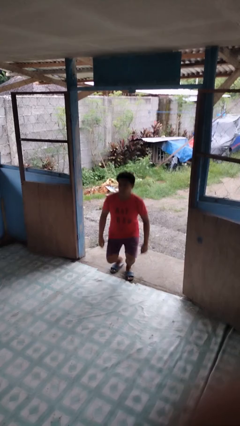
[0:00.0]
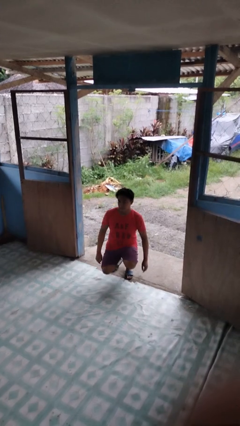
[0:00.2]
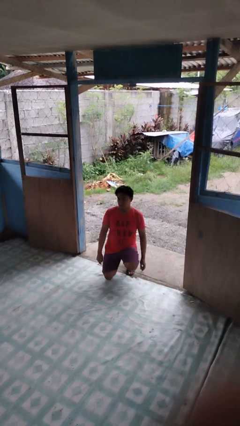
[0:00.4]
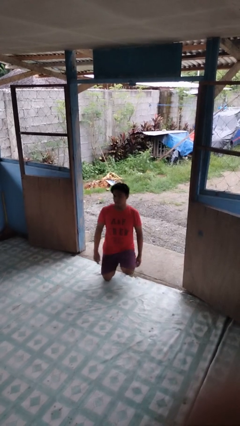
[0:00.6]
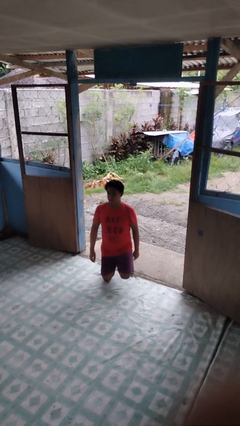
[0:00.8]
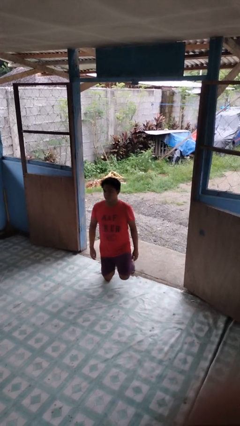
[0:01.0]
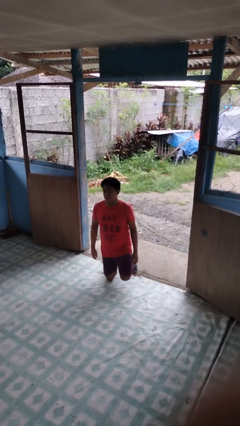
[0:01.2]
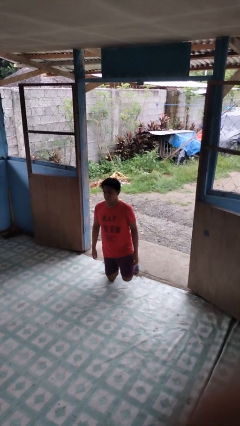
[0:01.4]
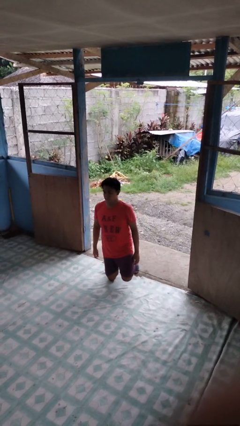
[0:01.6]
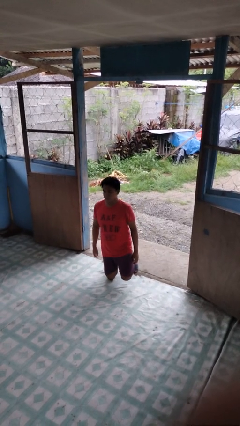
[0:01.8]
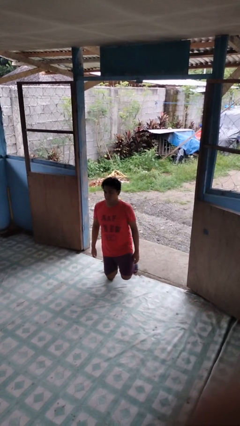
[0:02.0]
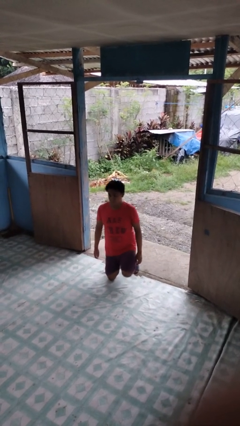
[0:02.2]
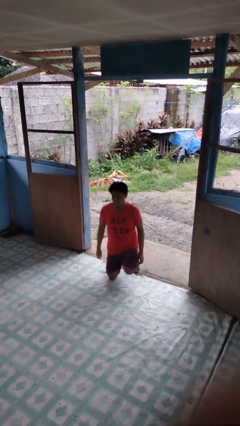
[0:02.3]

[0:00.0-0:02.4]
person kneels

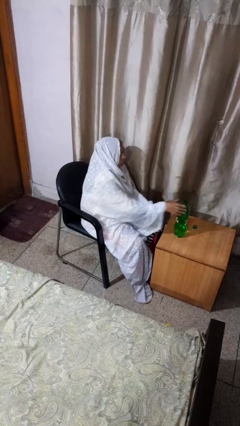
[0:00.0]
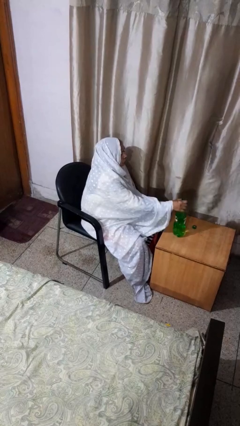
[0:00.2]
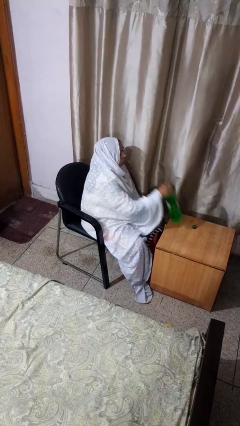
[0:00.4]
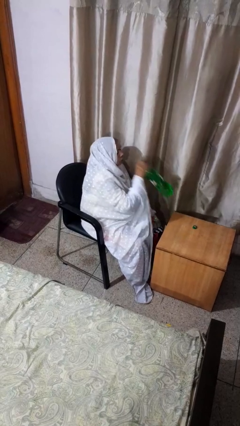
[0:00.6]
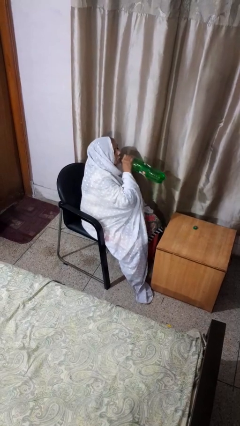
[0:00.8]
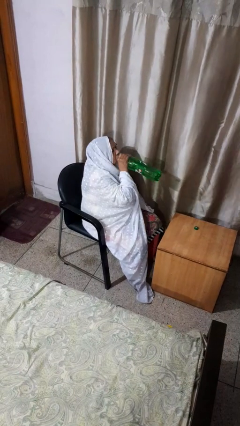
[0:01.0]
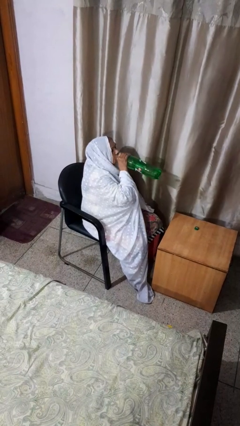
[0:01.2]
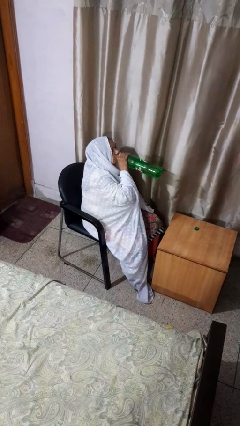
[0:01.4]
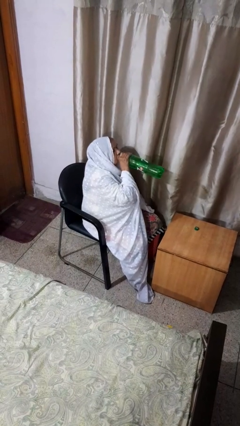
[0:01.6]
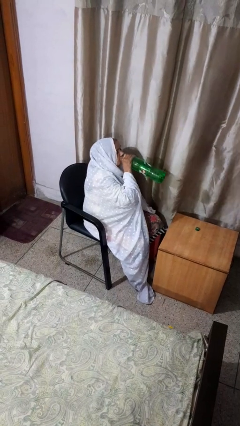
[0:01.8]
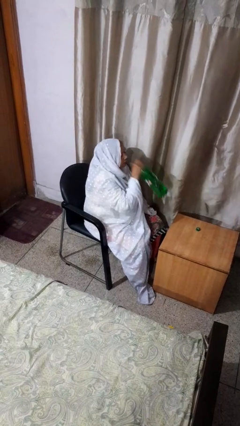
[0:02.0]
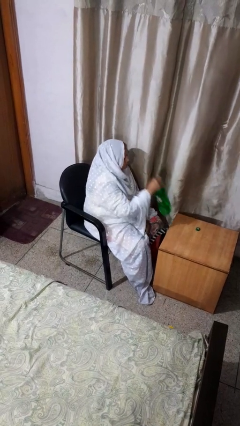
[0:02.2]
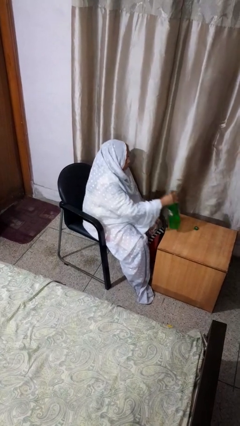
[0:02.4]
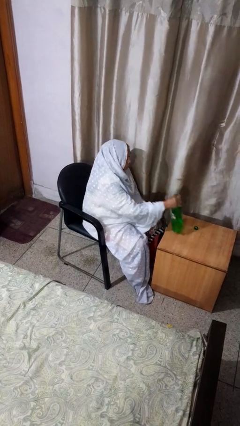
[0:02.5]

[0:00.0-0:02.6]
person drinks from bottle

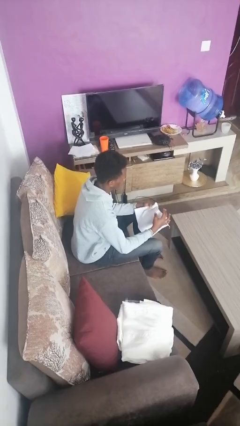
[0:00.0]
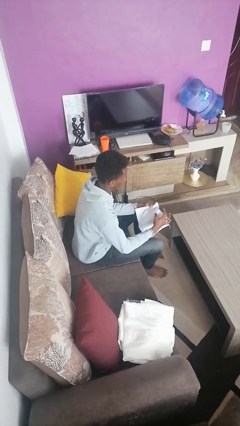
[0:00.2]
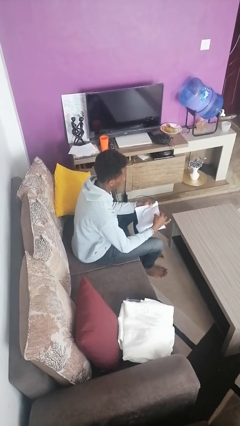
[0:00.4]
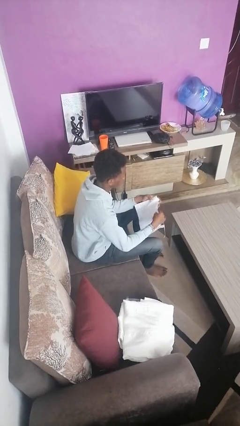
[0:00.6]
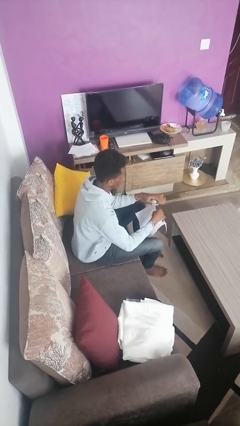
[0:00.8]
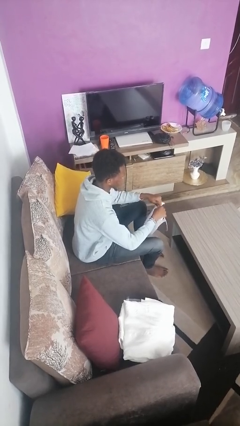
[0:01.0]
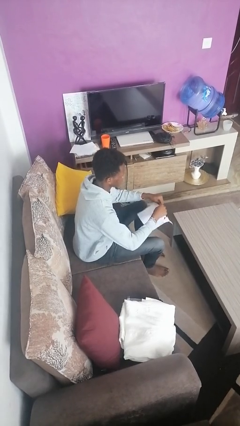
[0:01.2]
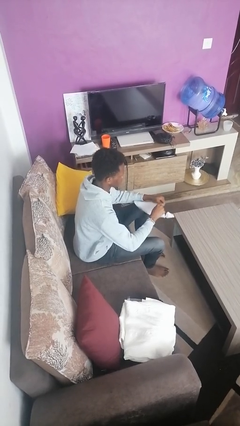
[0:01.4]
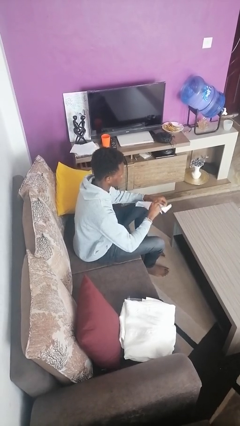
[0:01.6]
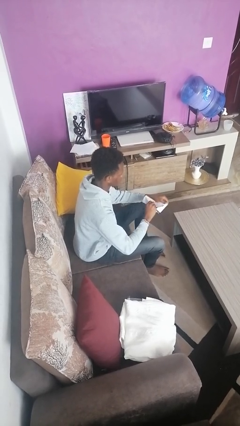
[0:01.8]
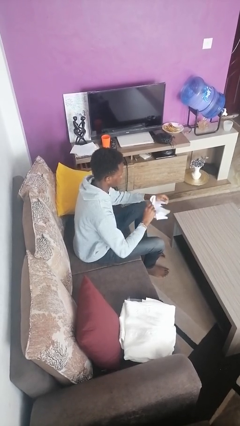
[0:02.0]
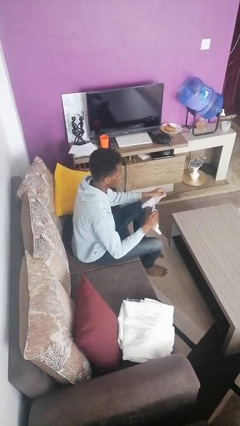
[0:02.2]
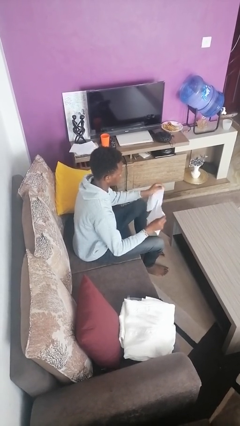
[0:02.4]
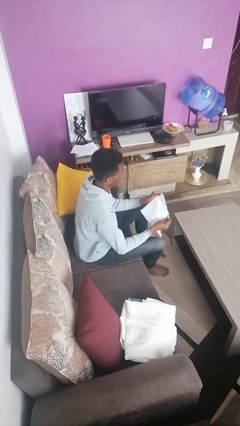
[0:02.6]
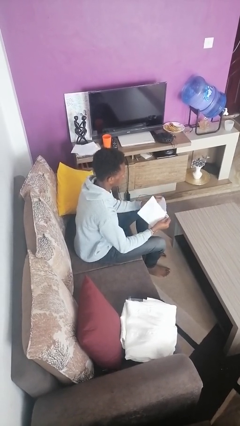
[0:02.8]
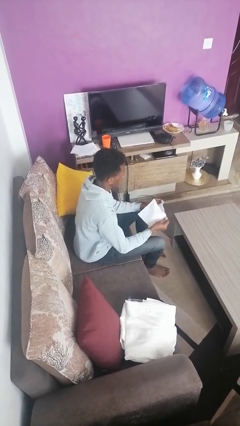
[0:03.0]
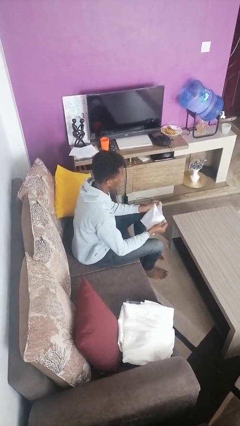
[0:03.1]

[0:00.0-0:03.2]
person tears paper

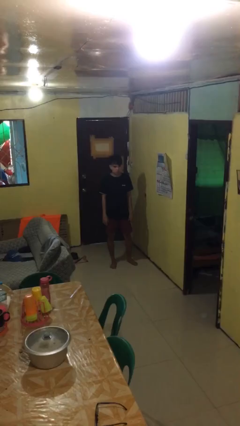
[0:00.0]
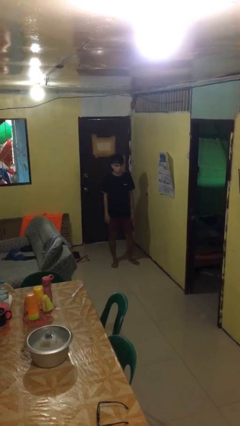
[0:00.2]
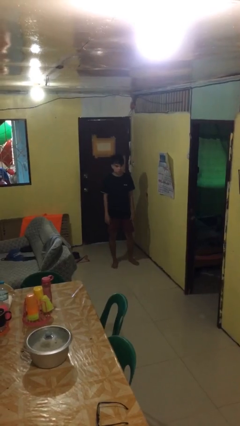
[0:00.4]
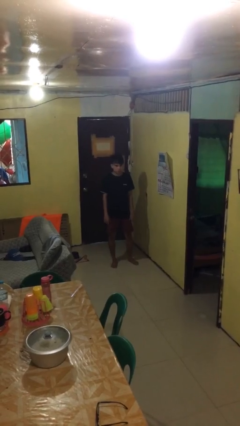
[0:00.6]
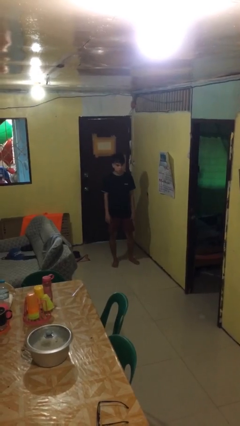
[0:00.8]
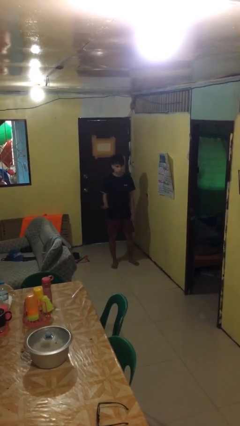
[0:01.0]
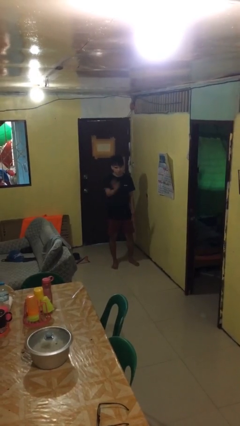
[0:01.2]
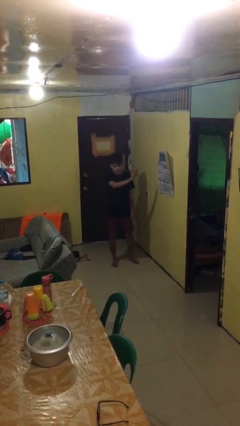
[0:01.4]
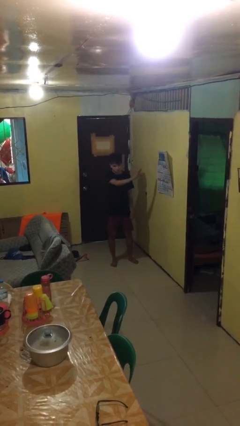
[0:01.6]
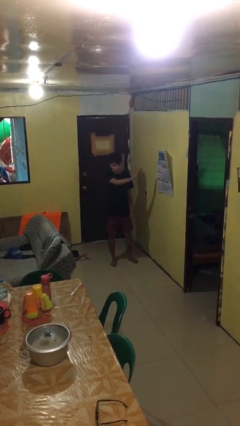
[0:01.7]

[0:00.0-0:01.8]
person gestures swipe left

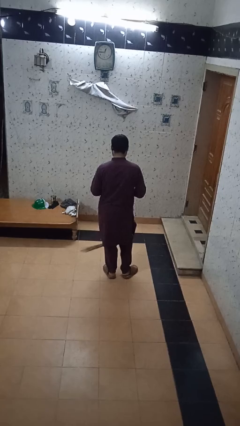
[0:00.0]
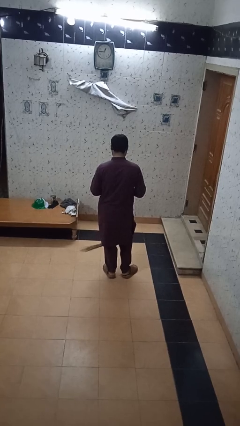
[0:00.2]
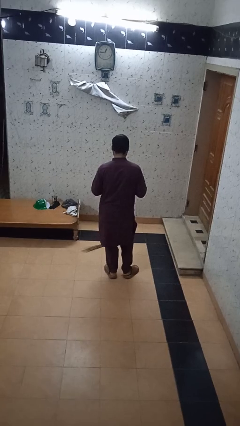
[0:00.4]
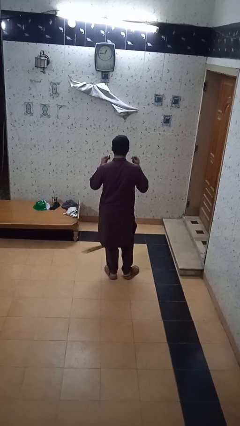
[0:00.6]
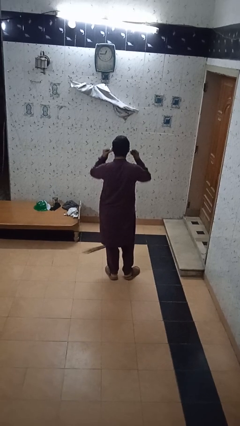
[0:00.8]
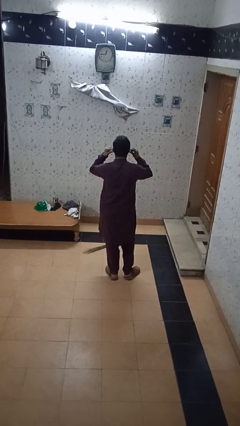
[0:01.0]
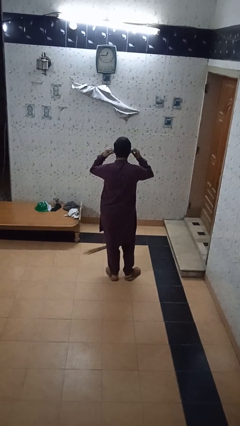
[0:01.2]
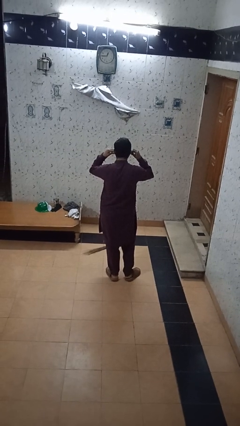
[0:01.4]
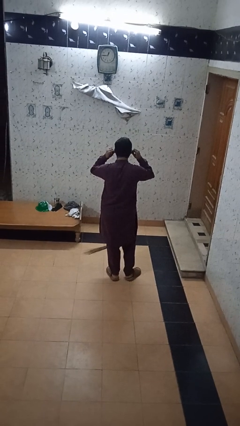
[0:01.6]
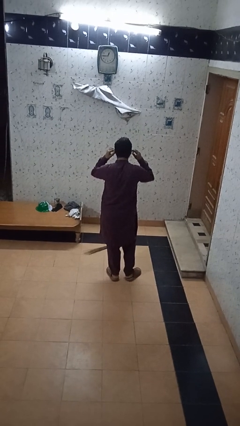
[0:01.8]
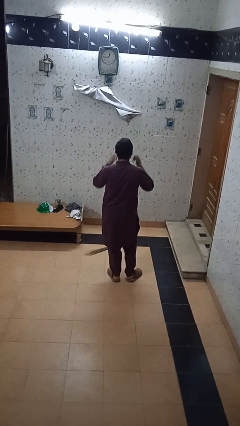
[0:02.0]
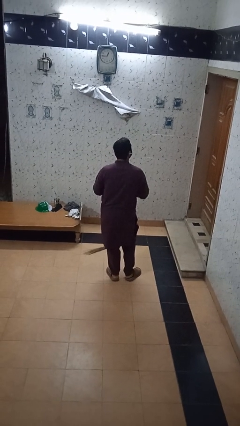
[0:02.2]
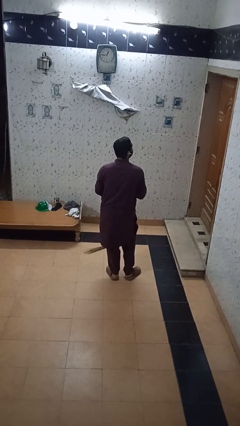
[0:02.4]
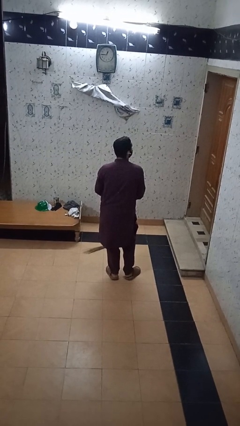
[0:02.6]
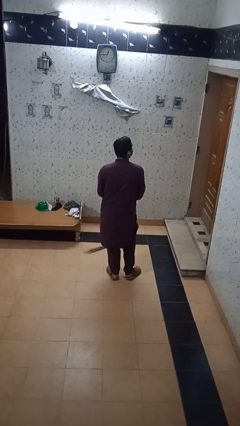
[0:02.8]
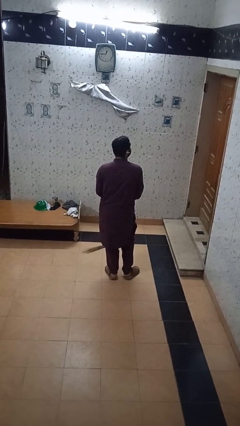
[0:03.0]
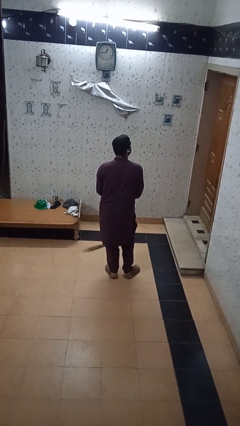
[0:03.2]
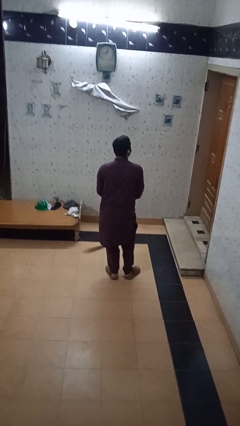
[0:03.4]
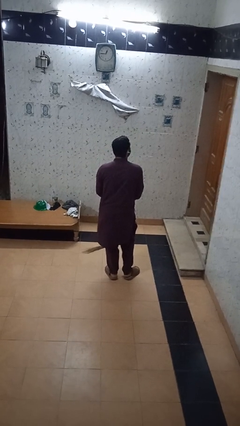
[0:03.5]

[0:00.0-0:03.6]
person puts on headphones

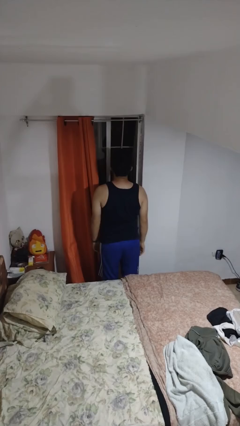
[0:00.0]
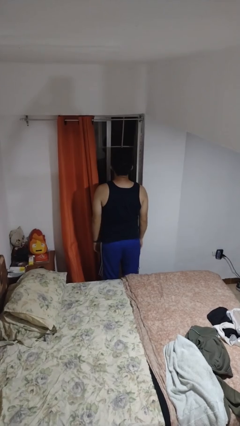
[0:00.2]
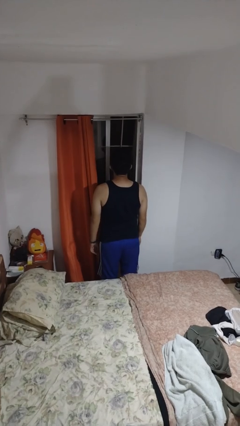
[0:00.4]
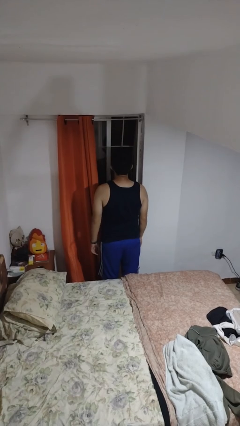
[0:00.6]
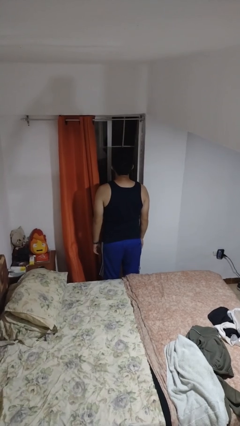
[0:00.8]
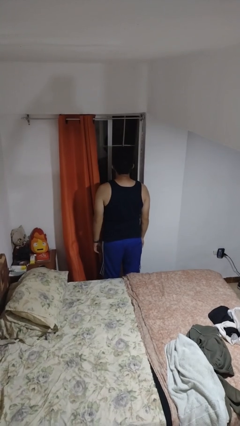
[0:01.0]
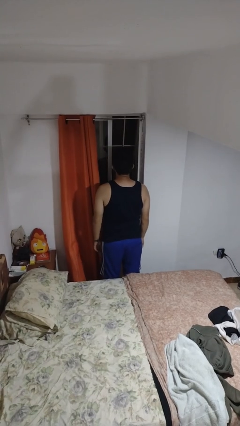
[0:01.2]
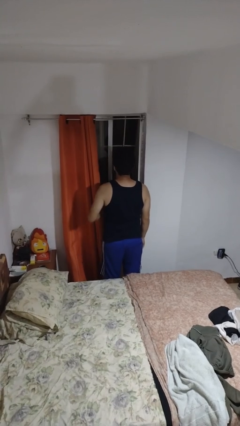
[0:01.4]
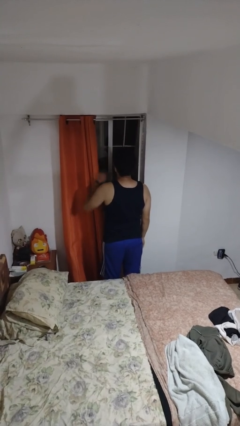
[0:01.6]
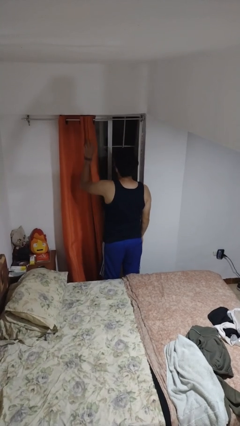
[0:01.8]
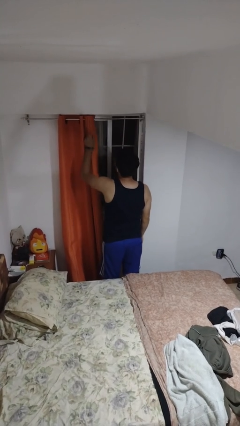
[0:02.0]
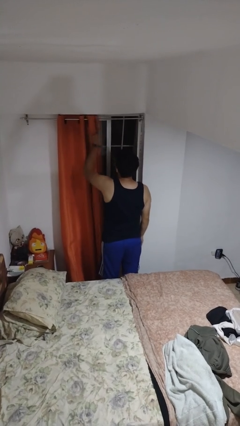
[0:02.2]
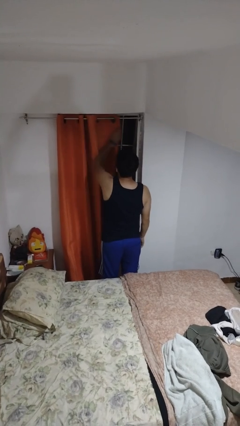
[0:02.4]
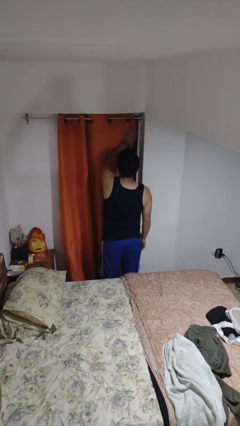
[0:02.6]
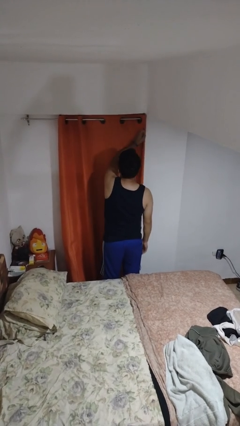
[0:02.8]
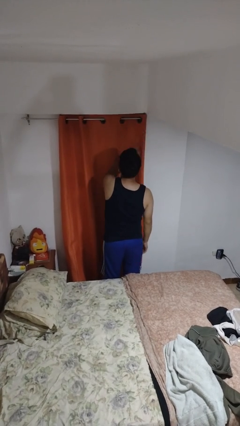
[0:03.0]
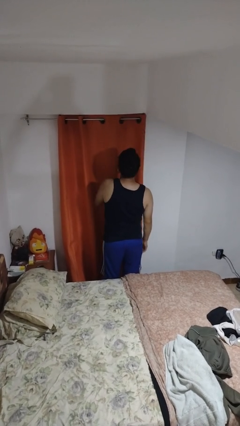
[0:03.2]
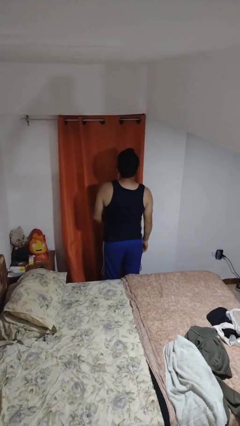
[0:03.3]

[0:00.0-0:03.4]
person closes curtains

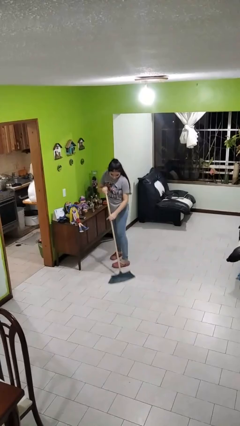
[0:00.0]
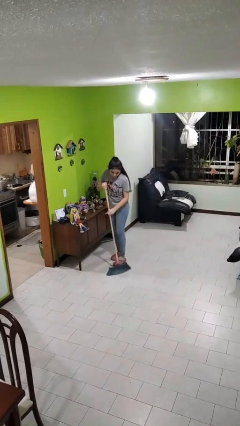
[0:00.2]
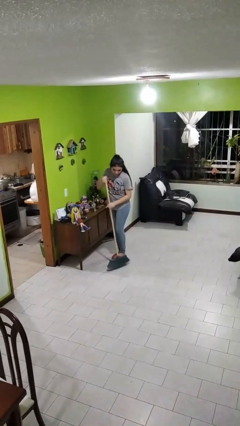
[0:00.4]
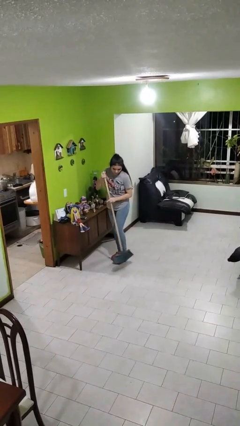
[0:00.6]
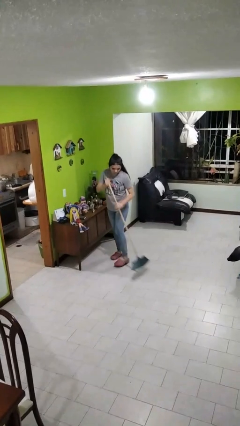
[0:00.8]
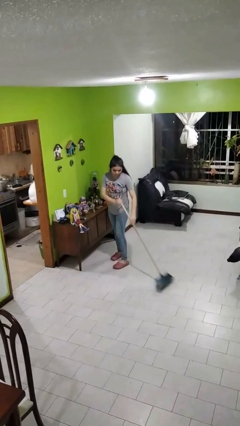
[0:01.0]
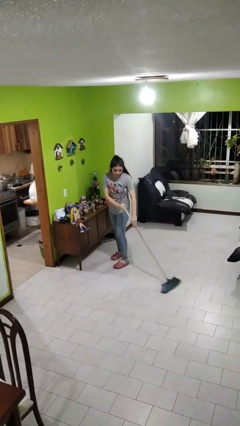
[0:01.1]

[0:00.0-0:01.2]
person sweeps floor
